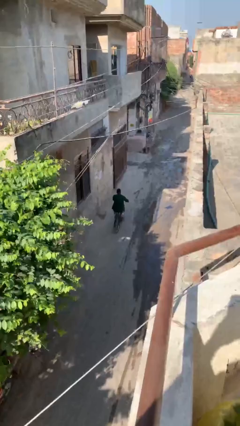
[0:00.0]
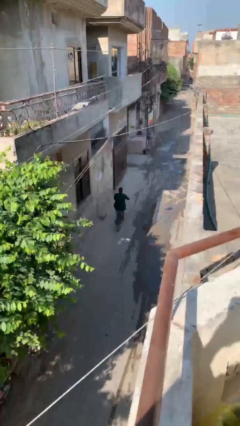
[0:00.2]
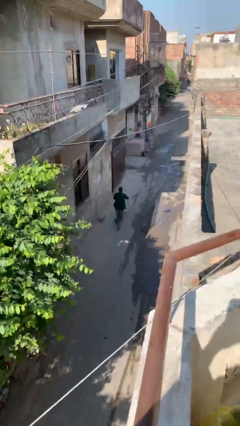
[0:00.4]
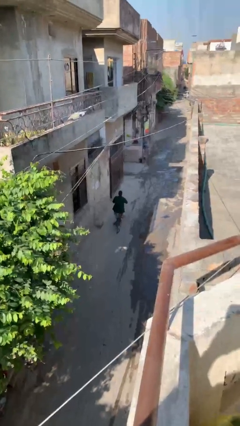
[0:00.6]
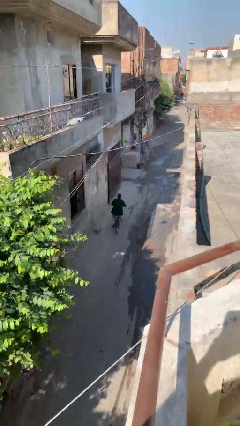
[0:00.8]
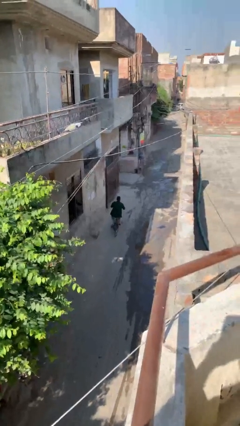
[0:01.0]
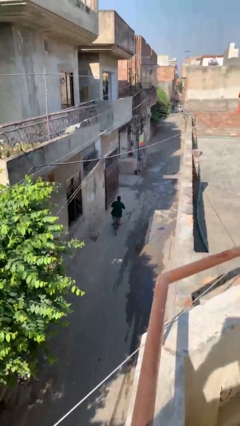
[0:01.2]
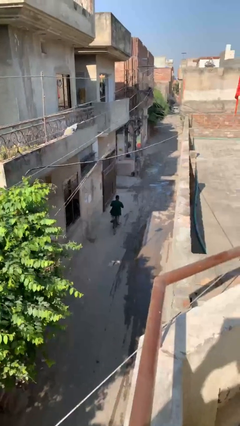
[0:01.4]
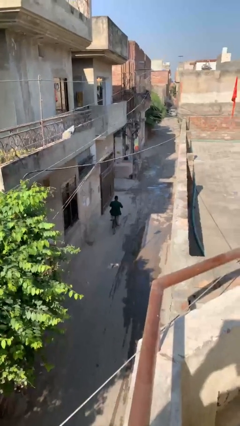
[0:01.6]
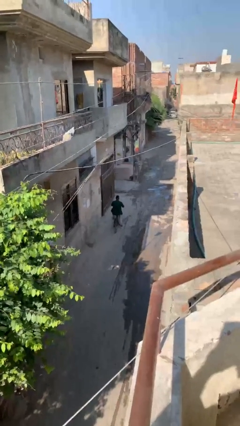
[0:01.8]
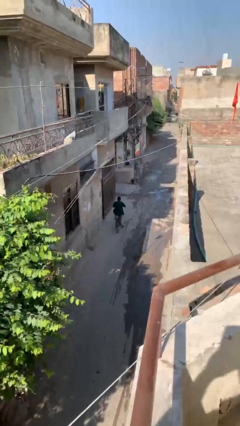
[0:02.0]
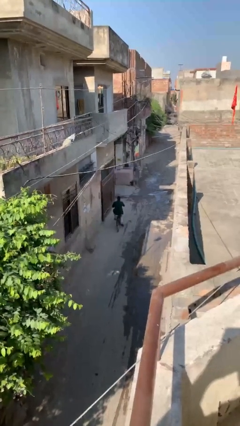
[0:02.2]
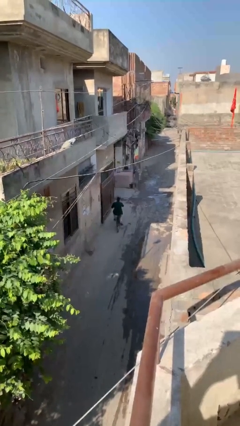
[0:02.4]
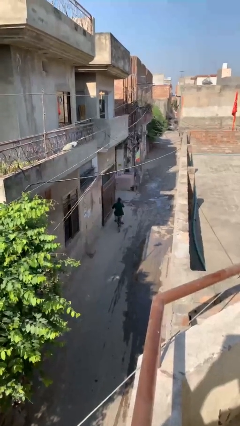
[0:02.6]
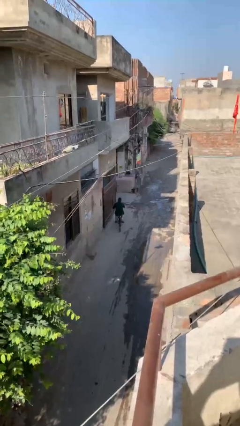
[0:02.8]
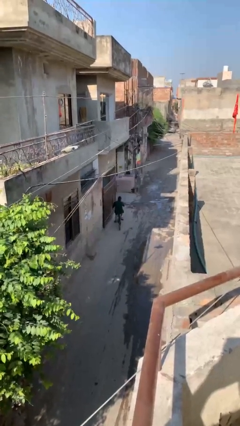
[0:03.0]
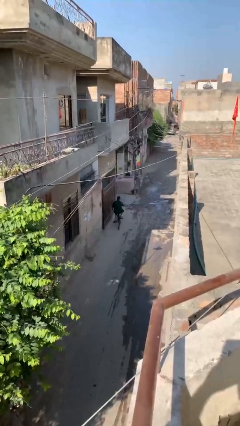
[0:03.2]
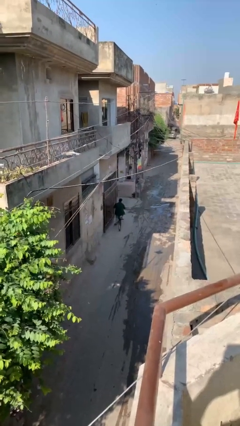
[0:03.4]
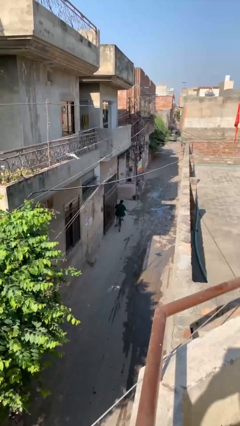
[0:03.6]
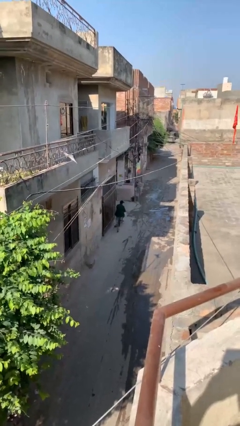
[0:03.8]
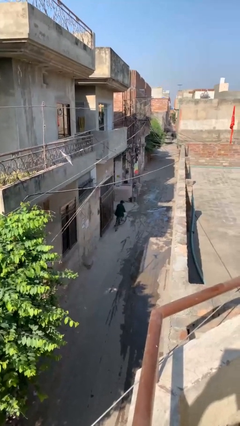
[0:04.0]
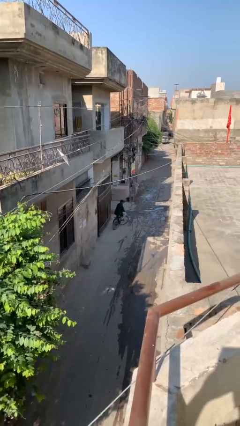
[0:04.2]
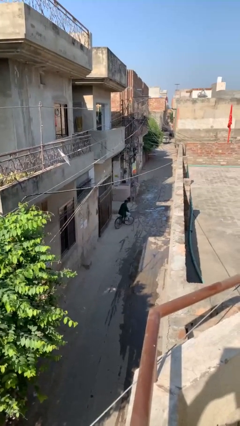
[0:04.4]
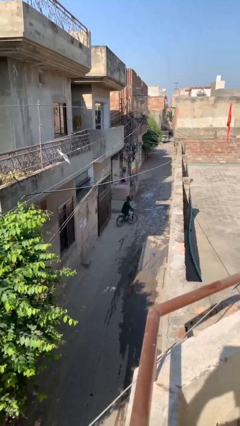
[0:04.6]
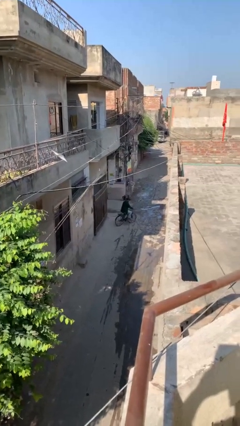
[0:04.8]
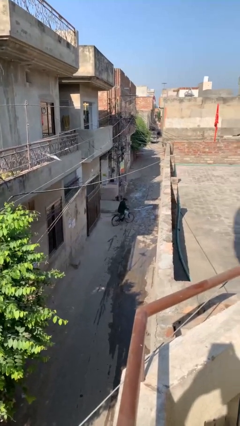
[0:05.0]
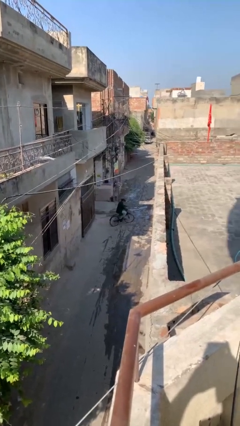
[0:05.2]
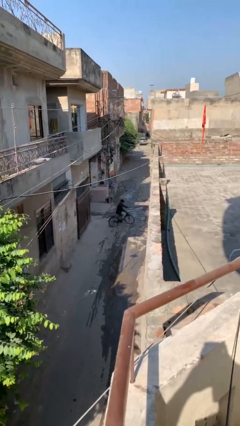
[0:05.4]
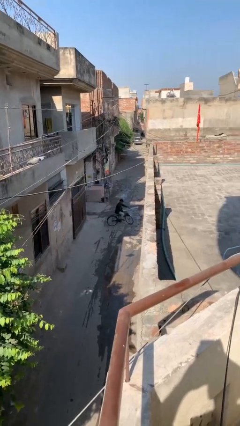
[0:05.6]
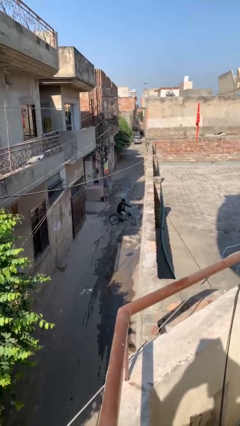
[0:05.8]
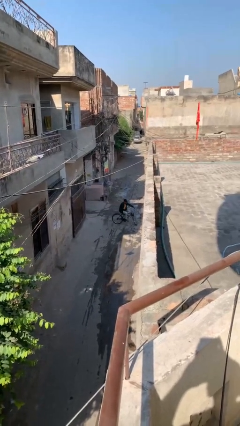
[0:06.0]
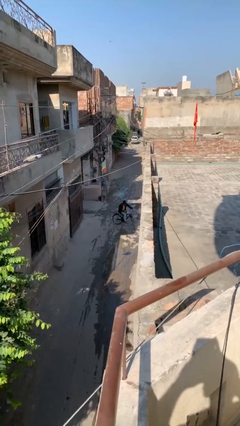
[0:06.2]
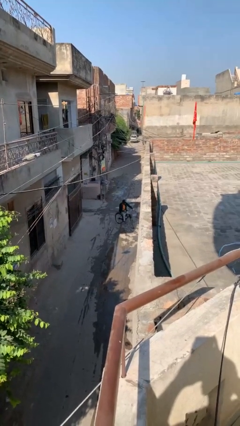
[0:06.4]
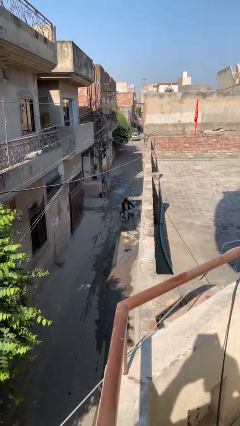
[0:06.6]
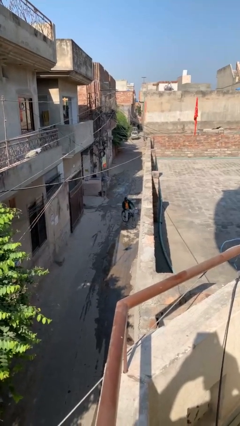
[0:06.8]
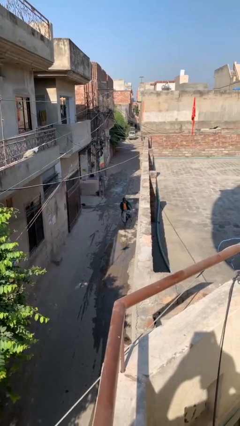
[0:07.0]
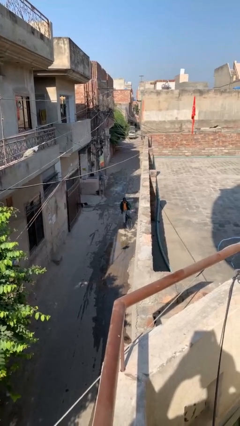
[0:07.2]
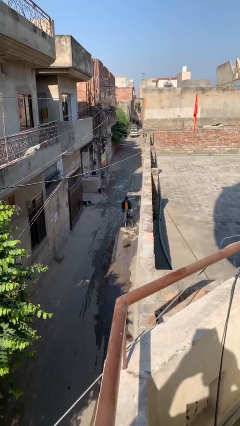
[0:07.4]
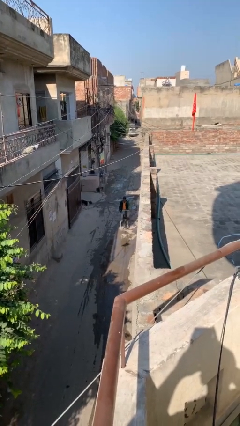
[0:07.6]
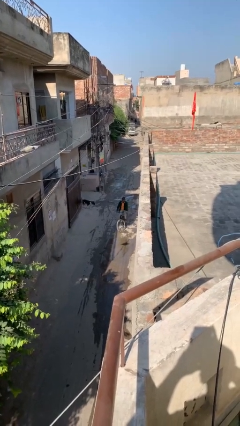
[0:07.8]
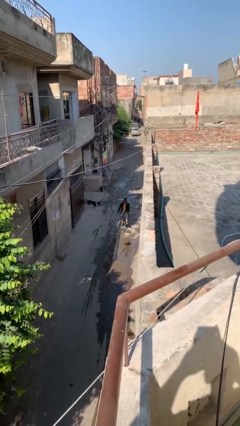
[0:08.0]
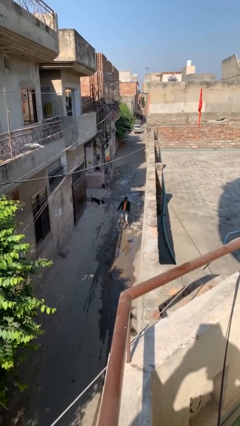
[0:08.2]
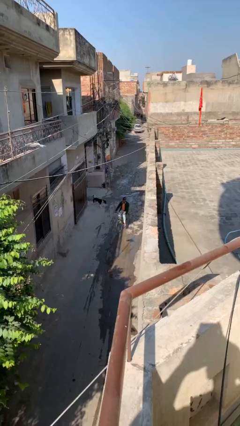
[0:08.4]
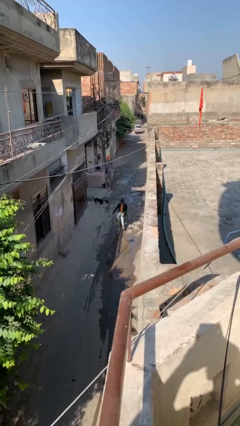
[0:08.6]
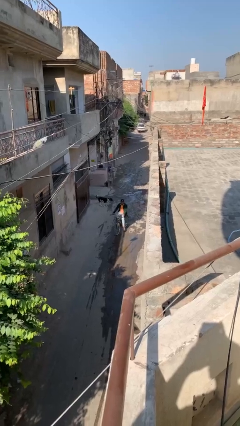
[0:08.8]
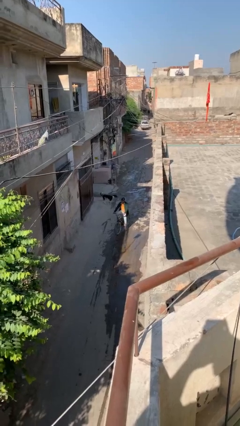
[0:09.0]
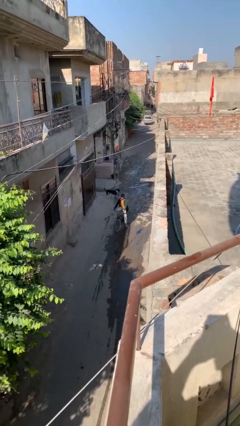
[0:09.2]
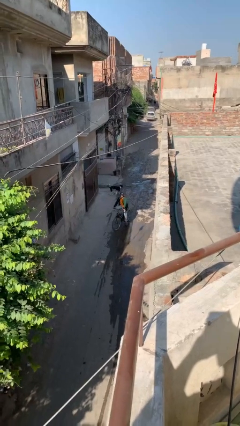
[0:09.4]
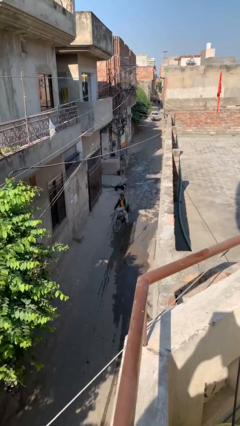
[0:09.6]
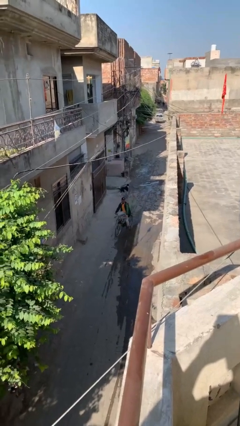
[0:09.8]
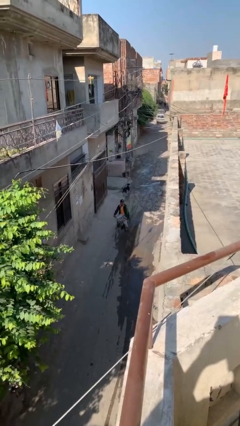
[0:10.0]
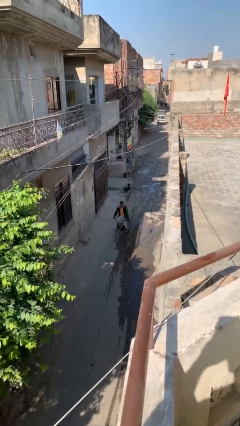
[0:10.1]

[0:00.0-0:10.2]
person rides bicycle

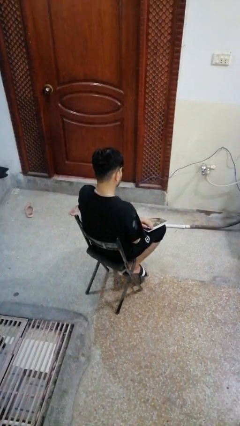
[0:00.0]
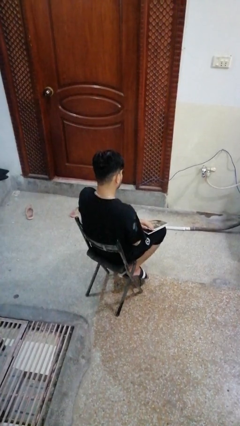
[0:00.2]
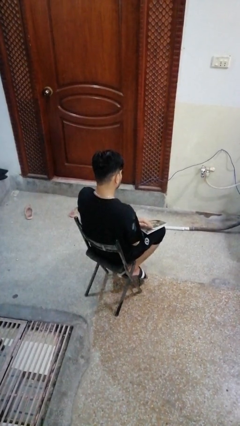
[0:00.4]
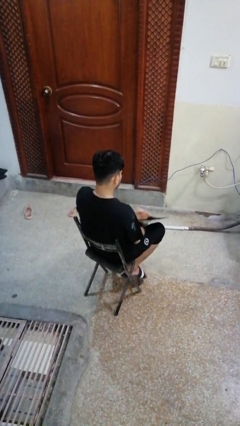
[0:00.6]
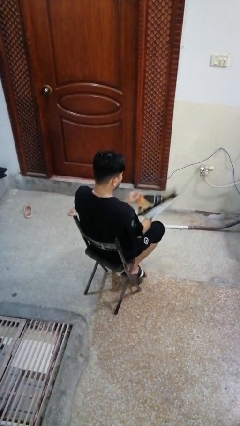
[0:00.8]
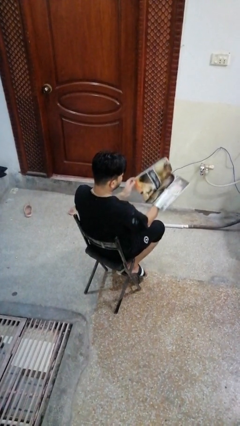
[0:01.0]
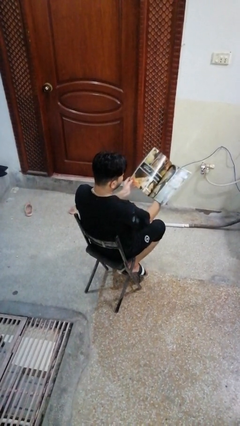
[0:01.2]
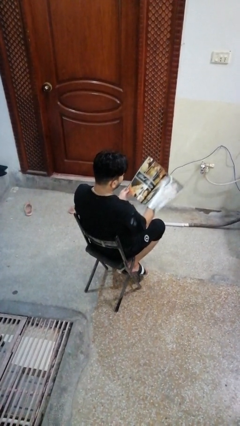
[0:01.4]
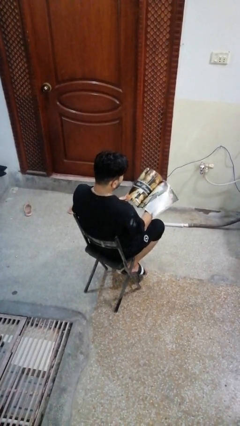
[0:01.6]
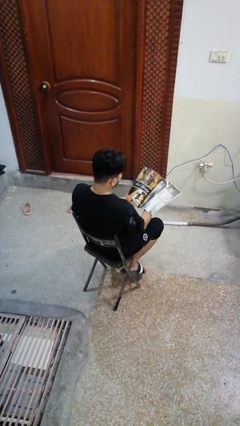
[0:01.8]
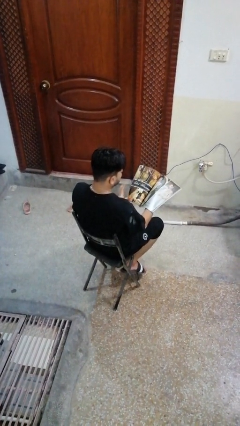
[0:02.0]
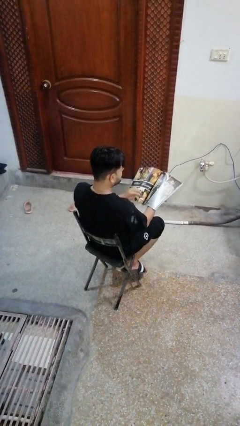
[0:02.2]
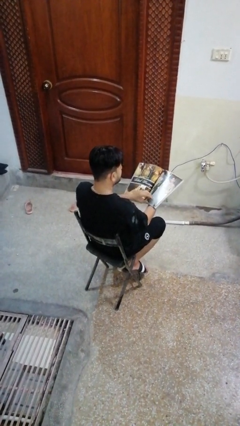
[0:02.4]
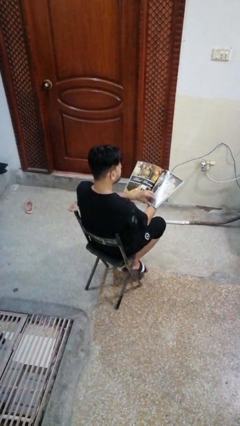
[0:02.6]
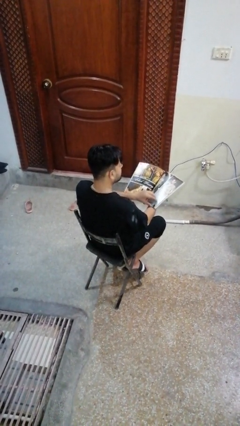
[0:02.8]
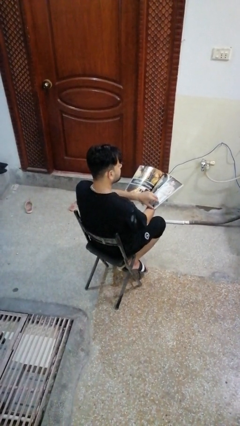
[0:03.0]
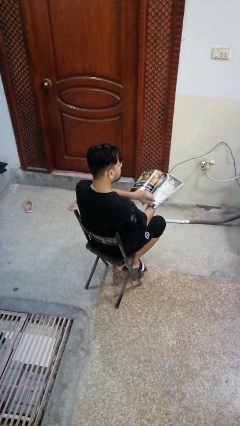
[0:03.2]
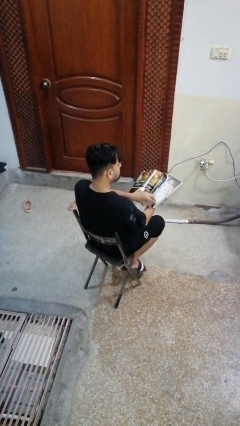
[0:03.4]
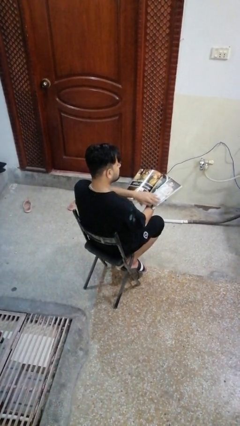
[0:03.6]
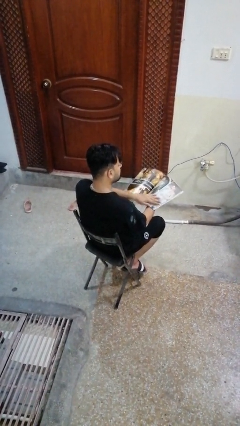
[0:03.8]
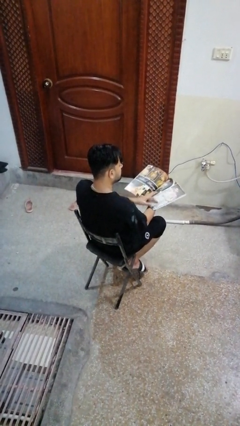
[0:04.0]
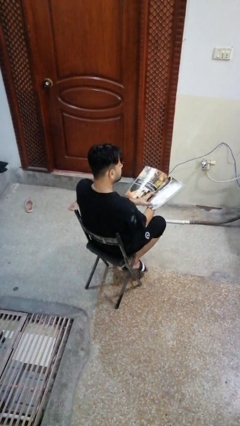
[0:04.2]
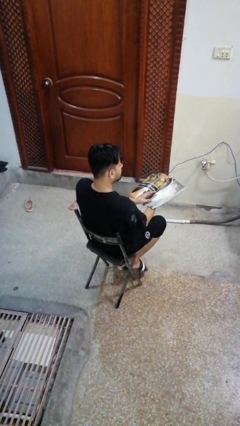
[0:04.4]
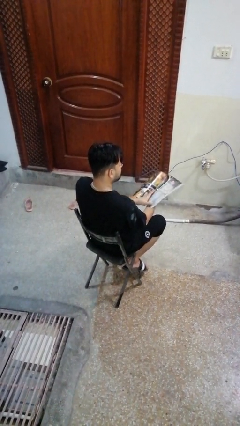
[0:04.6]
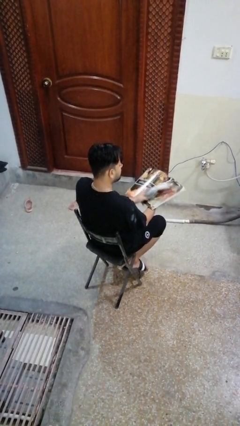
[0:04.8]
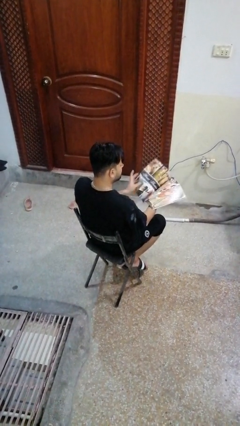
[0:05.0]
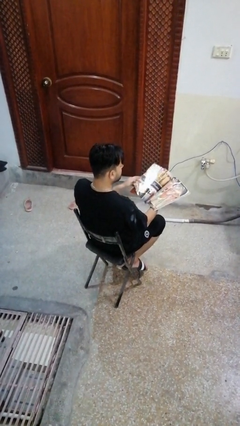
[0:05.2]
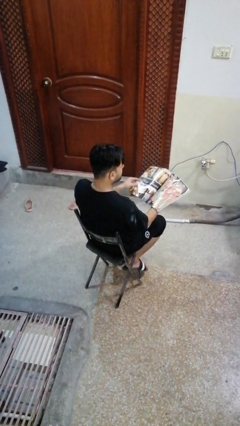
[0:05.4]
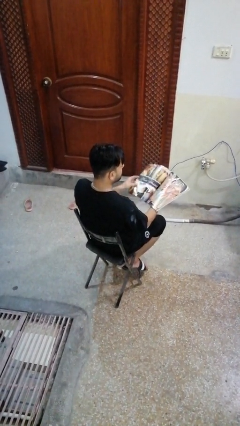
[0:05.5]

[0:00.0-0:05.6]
person reads magazine

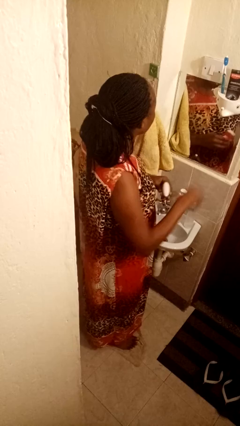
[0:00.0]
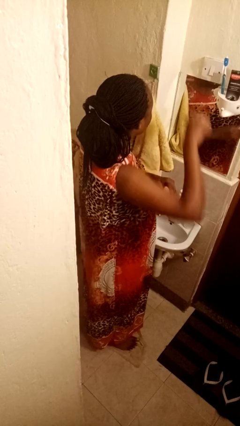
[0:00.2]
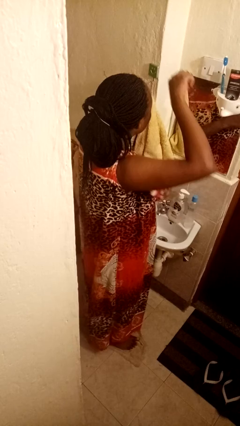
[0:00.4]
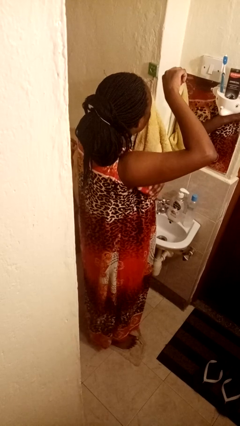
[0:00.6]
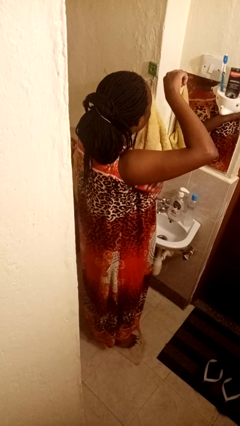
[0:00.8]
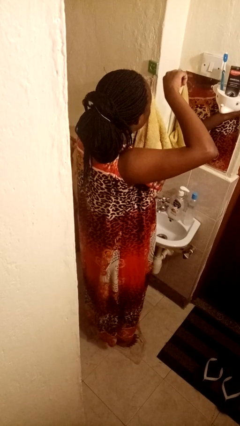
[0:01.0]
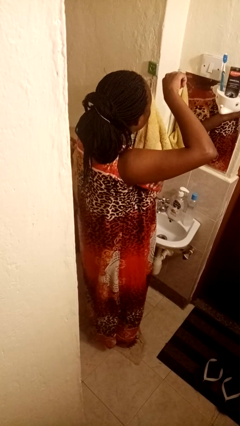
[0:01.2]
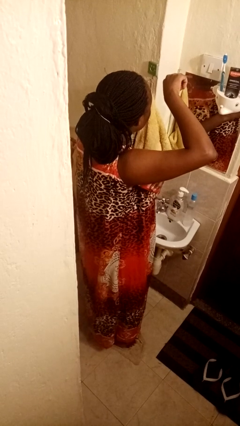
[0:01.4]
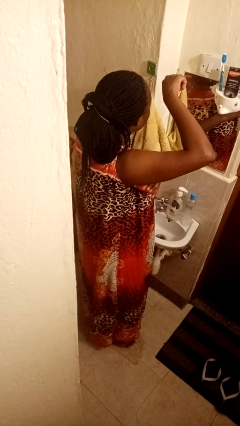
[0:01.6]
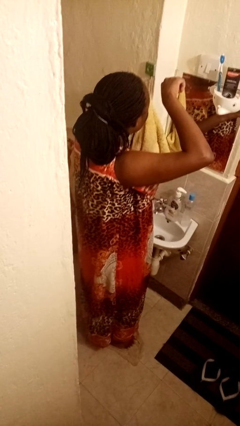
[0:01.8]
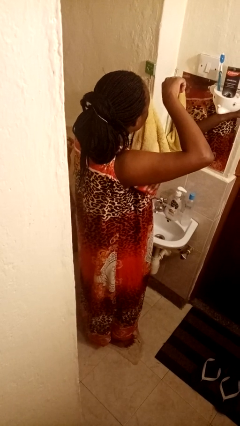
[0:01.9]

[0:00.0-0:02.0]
person applies deodorant
